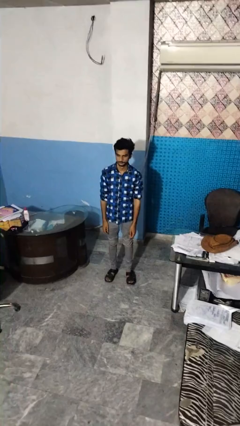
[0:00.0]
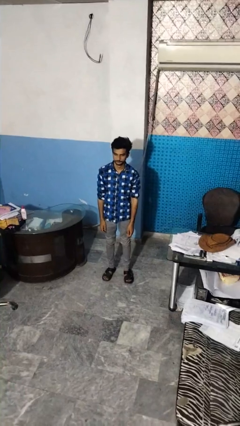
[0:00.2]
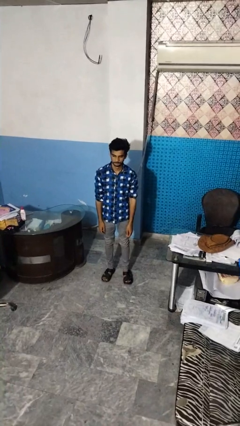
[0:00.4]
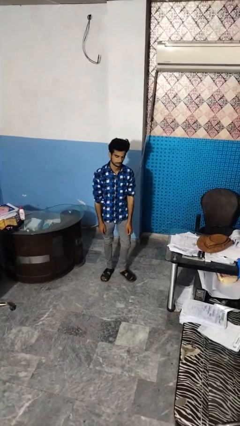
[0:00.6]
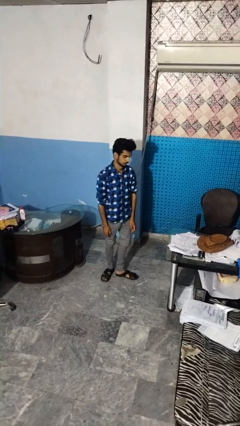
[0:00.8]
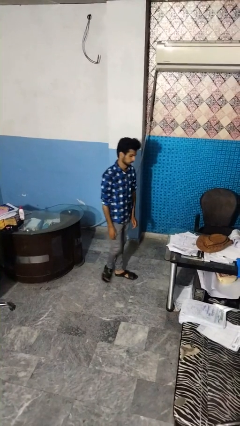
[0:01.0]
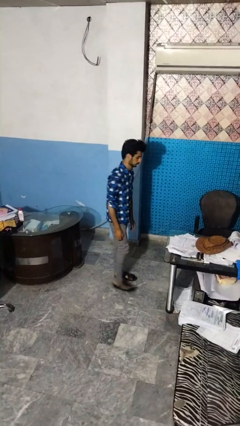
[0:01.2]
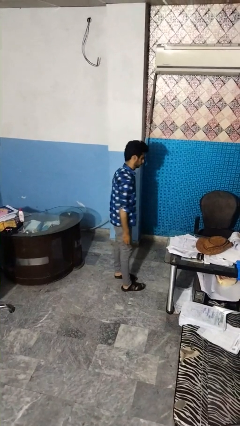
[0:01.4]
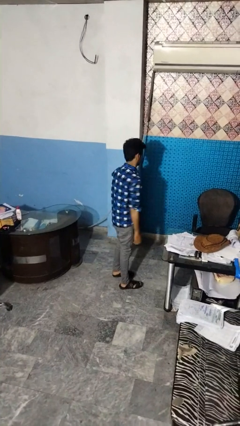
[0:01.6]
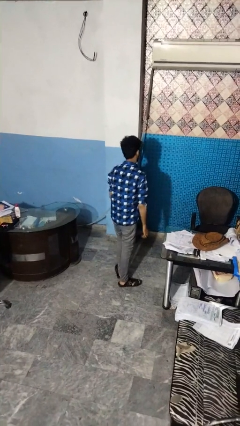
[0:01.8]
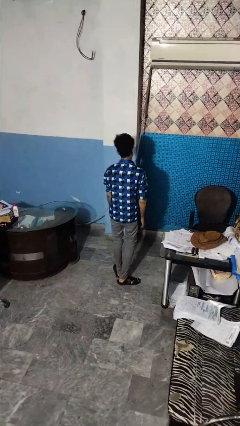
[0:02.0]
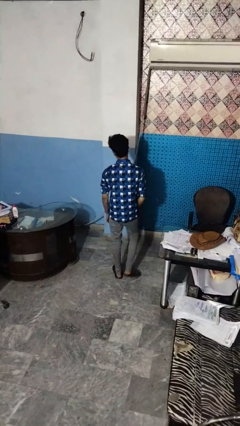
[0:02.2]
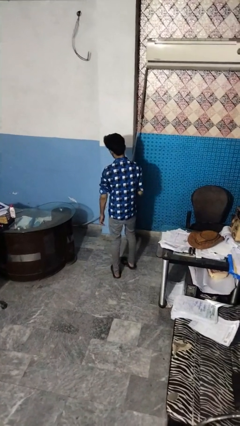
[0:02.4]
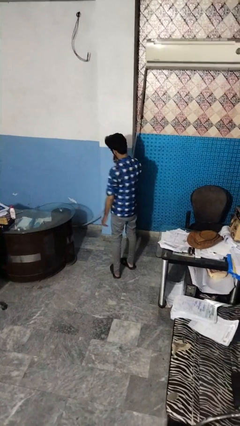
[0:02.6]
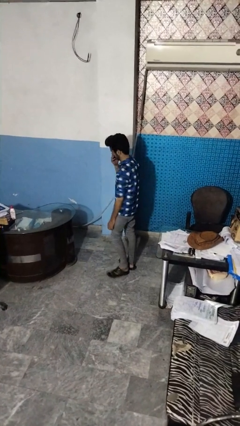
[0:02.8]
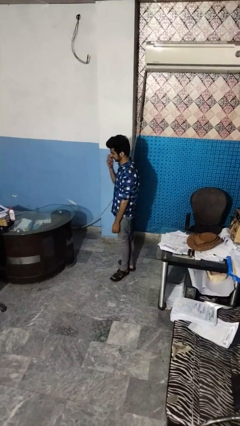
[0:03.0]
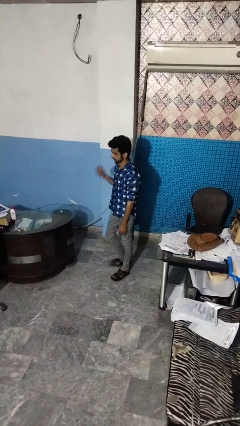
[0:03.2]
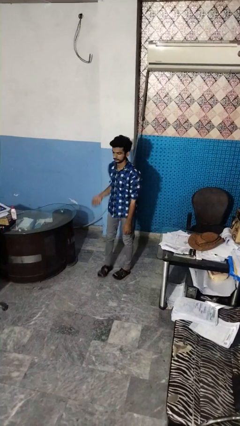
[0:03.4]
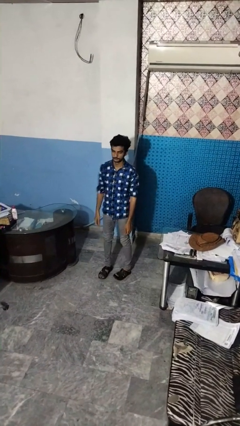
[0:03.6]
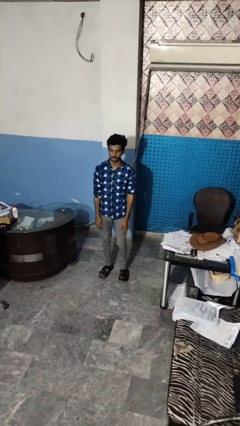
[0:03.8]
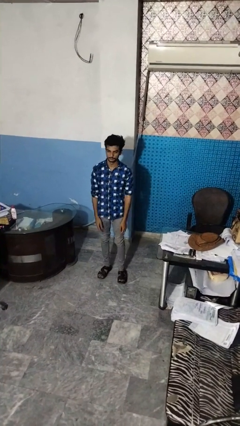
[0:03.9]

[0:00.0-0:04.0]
person twirls

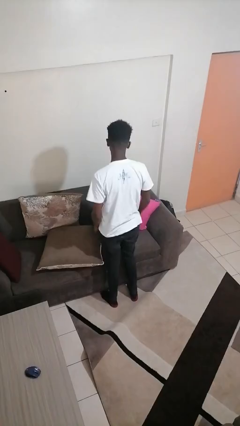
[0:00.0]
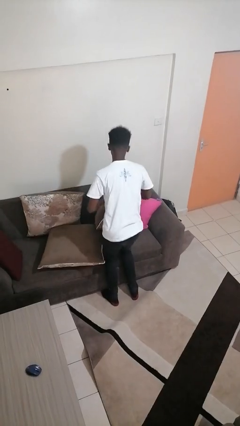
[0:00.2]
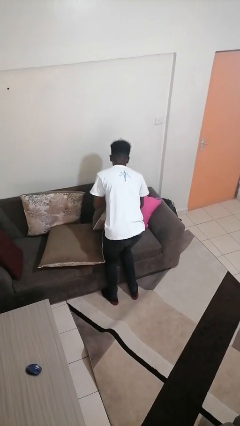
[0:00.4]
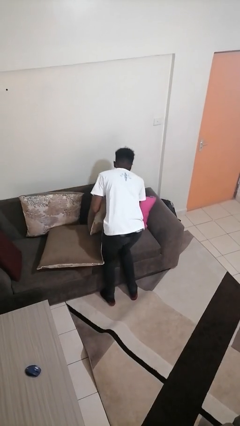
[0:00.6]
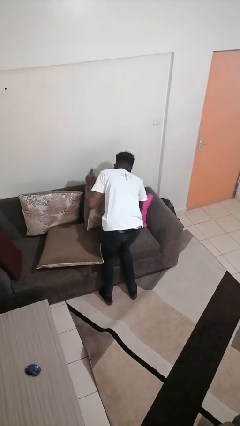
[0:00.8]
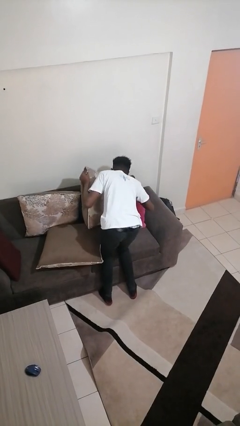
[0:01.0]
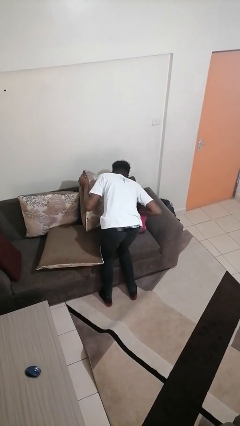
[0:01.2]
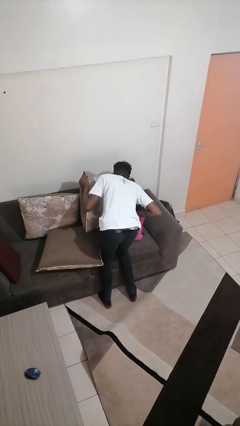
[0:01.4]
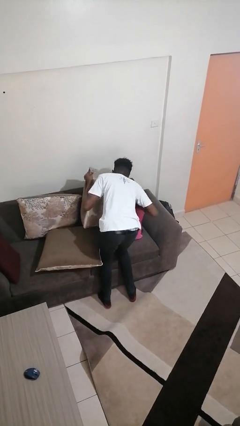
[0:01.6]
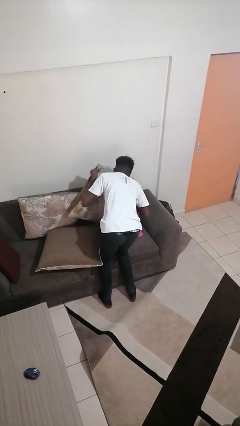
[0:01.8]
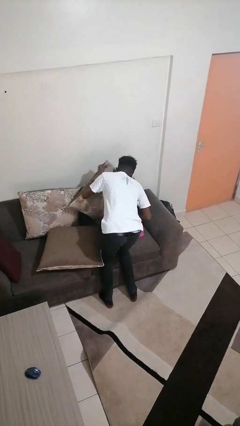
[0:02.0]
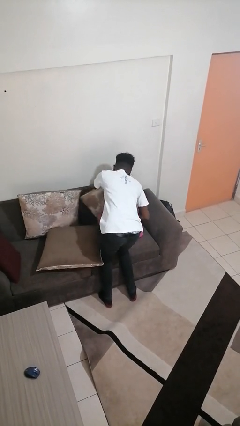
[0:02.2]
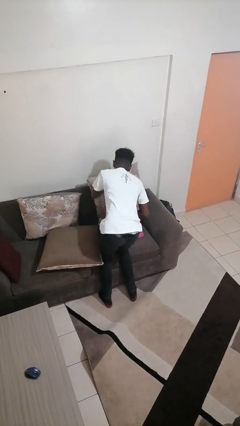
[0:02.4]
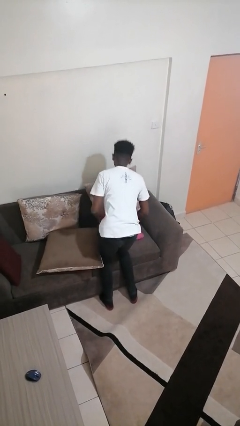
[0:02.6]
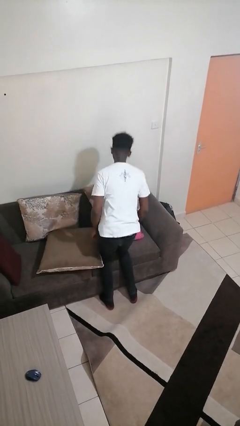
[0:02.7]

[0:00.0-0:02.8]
person searches in couch

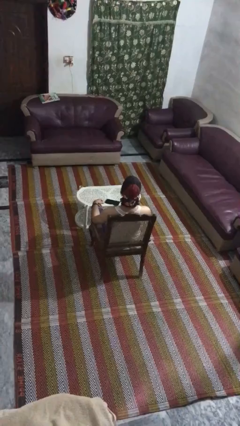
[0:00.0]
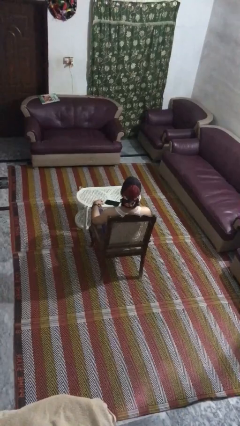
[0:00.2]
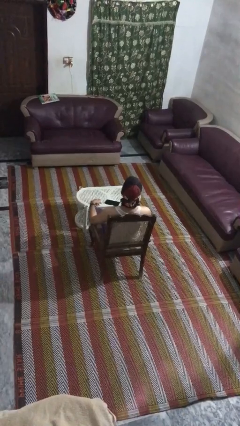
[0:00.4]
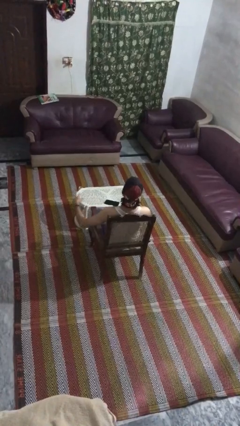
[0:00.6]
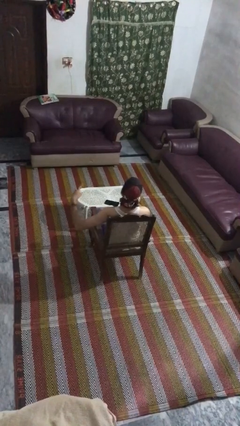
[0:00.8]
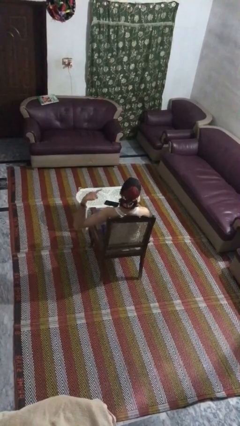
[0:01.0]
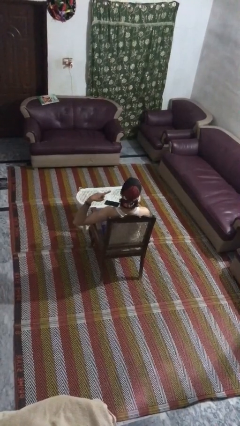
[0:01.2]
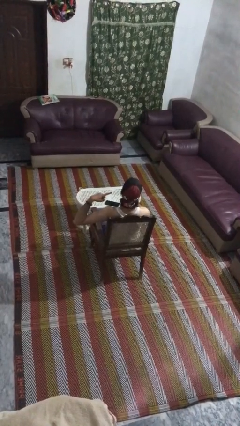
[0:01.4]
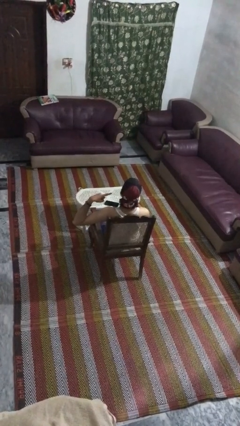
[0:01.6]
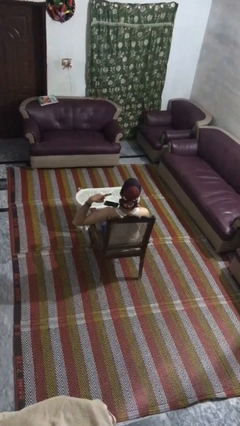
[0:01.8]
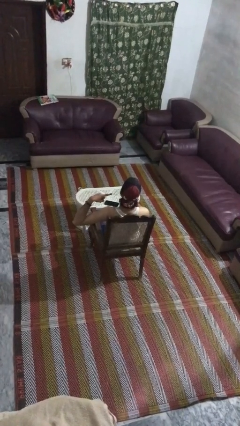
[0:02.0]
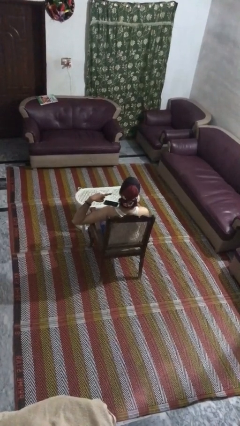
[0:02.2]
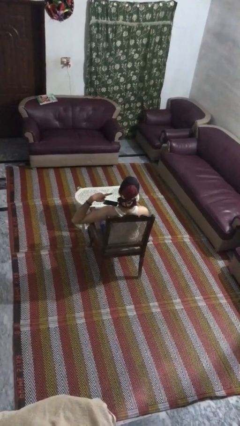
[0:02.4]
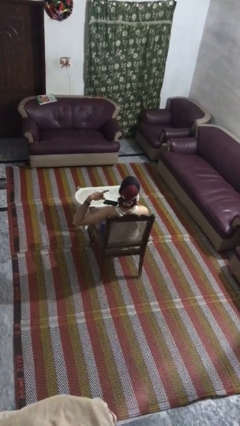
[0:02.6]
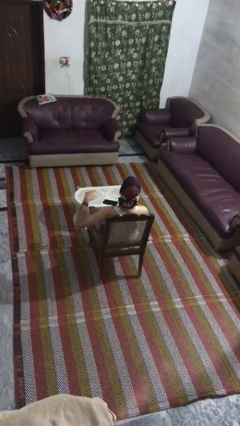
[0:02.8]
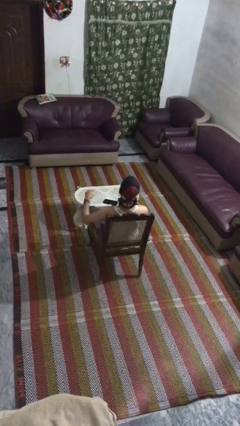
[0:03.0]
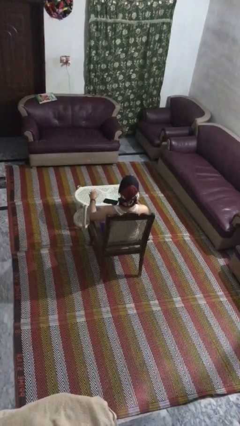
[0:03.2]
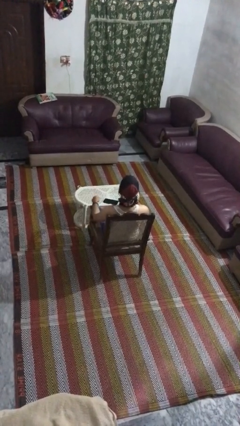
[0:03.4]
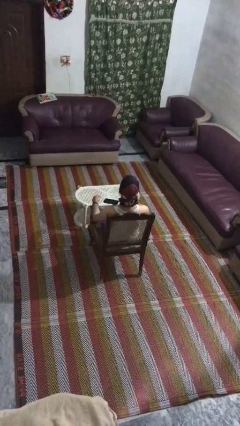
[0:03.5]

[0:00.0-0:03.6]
person gestures listen closely

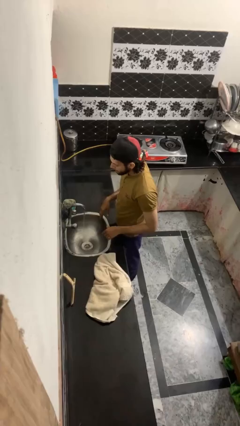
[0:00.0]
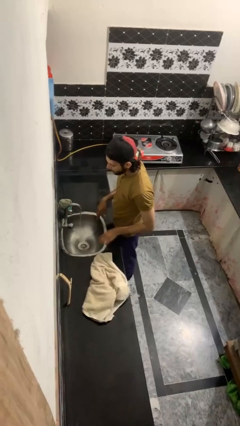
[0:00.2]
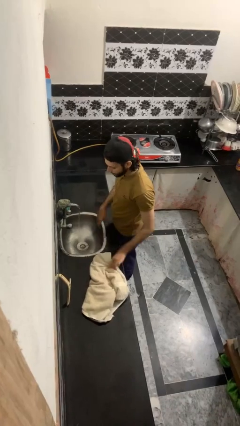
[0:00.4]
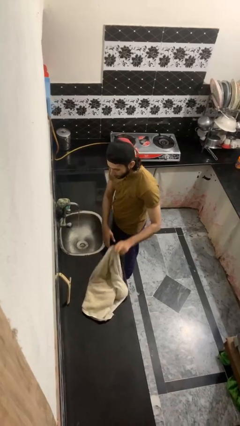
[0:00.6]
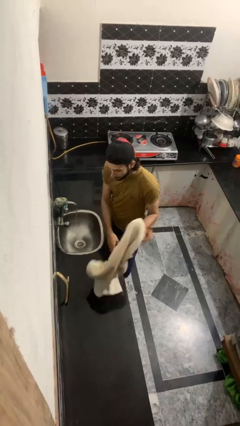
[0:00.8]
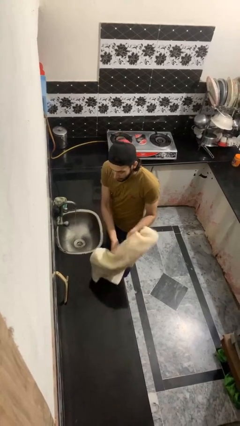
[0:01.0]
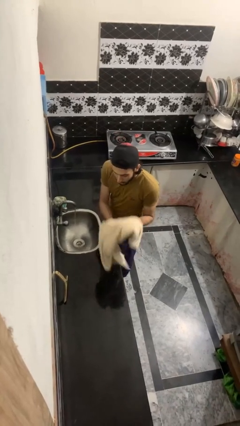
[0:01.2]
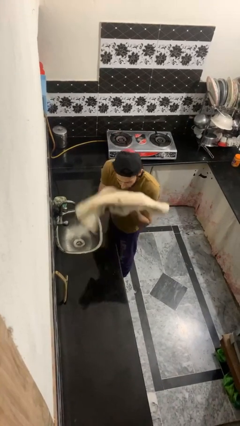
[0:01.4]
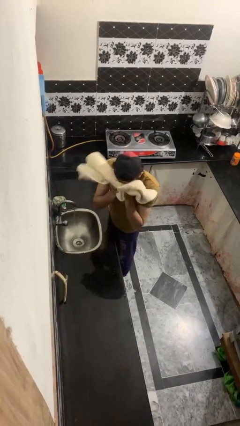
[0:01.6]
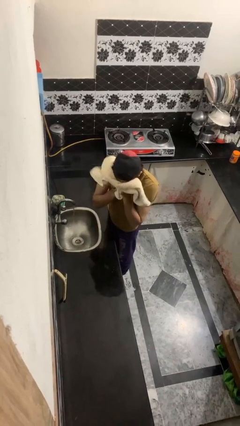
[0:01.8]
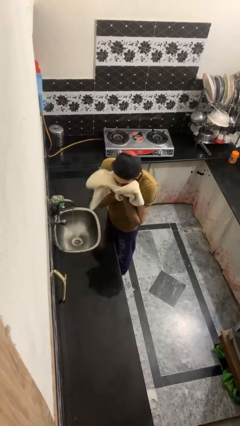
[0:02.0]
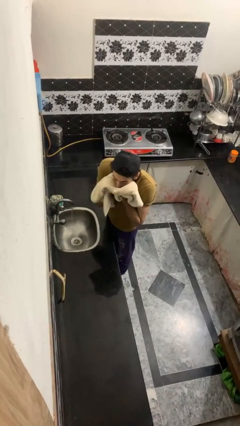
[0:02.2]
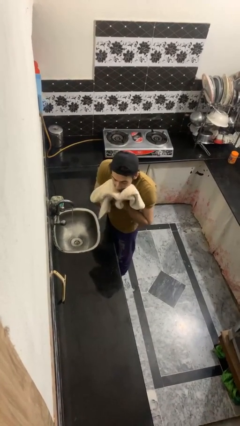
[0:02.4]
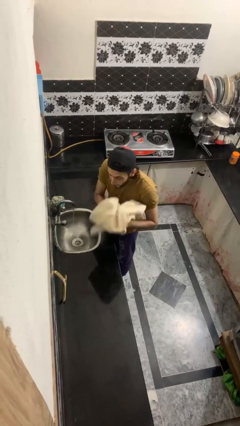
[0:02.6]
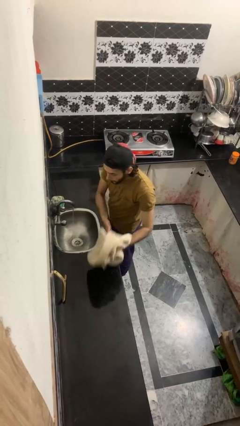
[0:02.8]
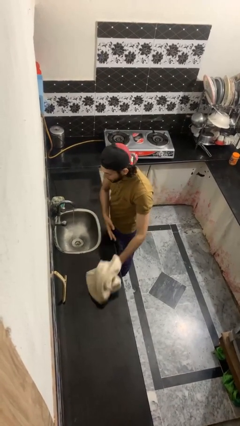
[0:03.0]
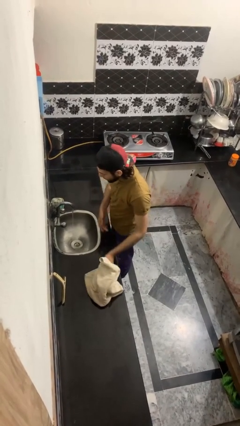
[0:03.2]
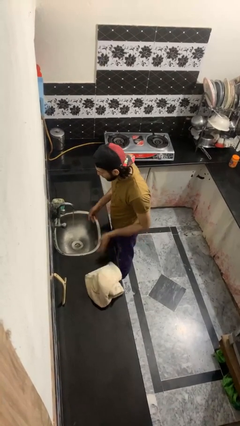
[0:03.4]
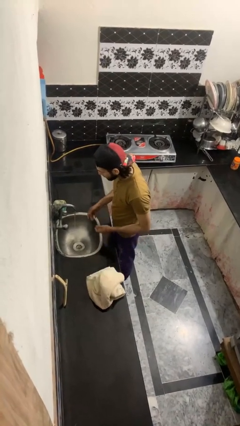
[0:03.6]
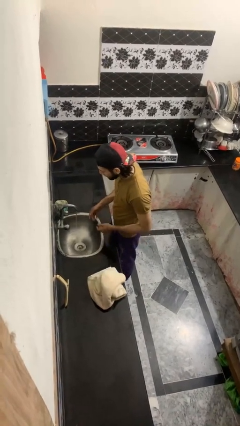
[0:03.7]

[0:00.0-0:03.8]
person dries face with towel

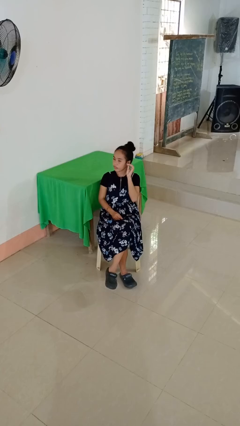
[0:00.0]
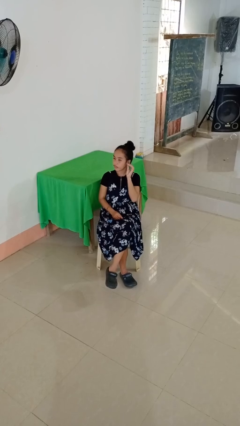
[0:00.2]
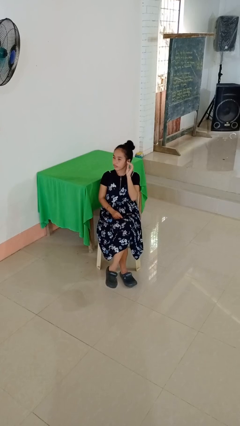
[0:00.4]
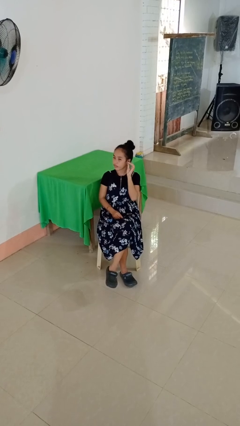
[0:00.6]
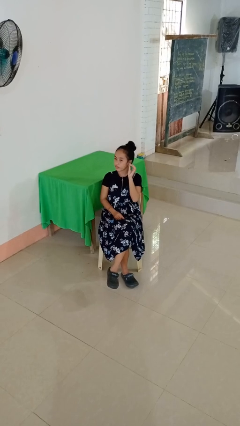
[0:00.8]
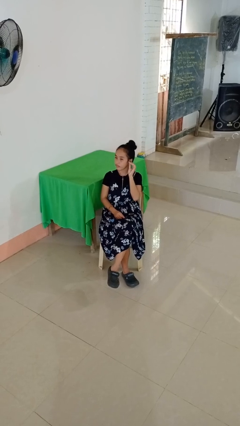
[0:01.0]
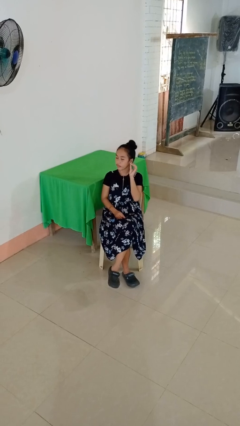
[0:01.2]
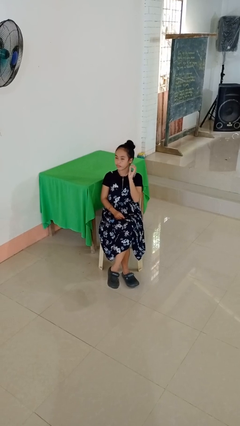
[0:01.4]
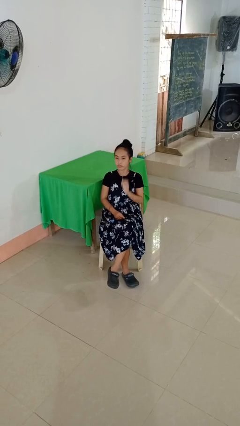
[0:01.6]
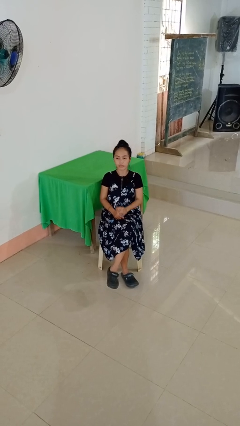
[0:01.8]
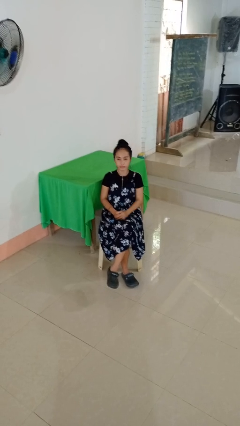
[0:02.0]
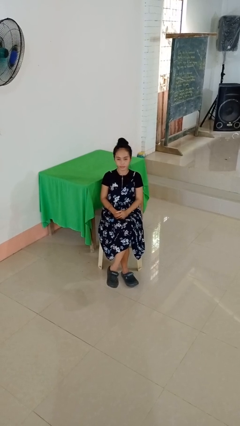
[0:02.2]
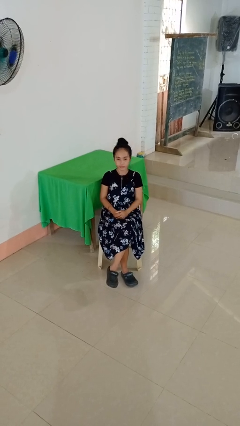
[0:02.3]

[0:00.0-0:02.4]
person touches earlobe

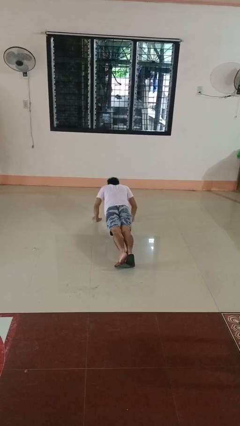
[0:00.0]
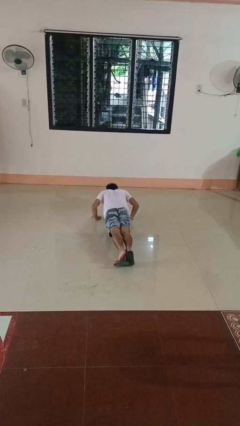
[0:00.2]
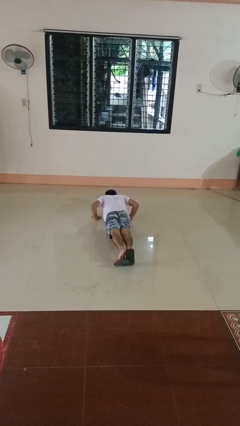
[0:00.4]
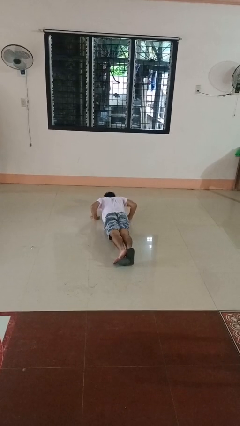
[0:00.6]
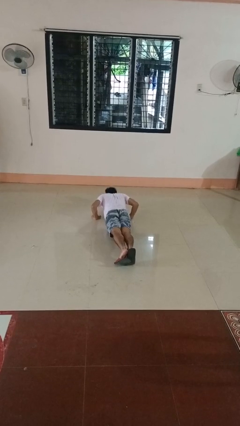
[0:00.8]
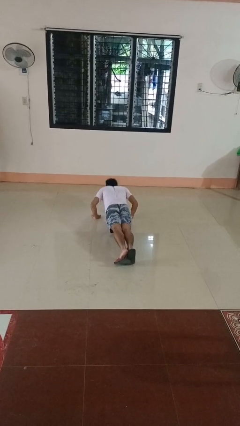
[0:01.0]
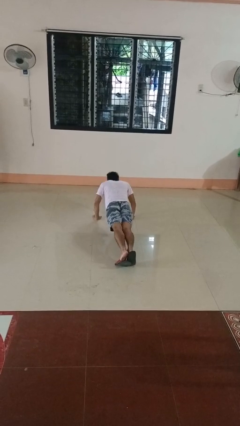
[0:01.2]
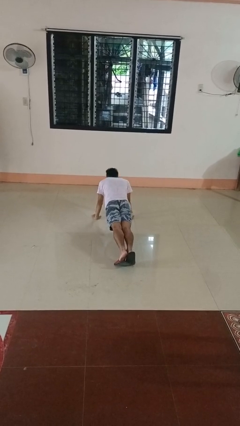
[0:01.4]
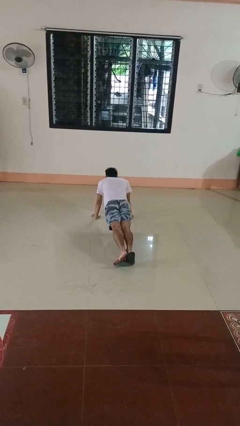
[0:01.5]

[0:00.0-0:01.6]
person exercises with pushup
